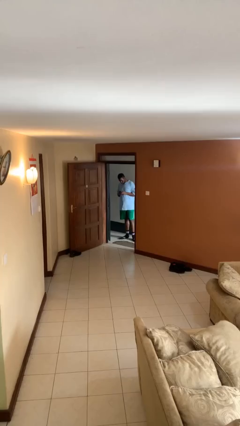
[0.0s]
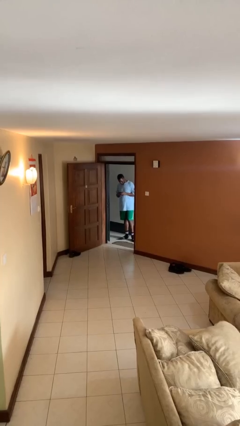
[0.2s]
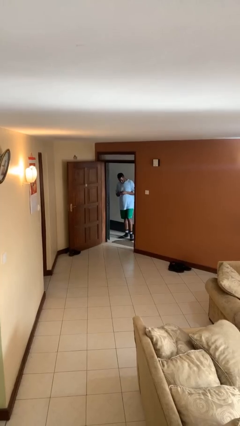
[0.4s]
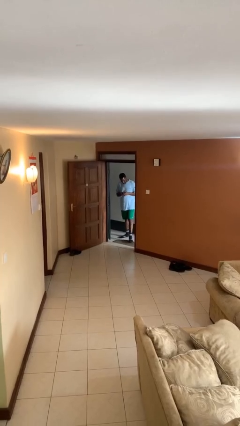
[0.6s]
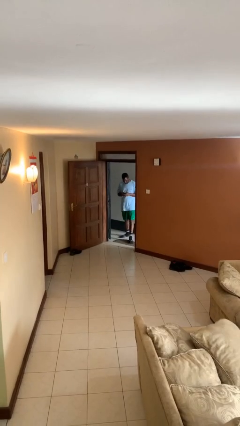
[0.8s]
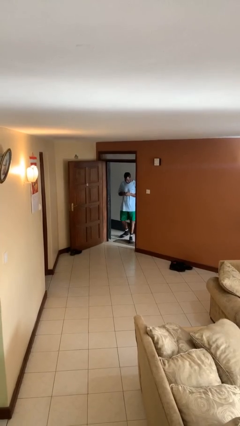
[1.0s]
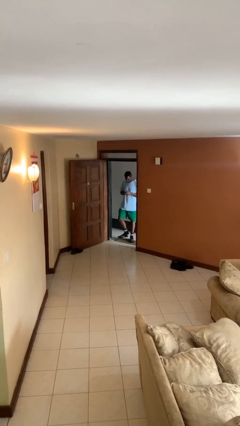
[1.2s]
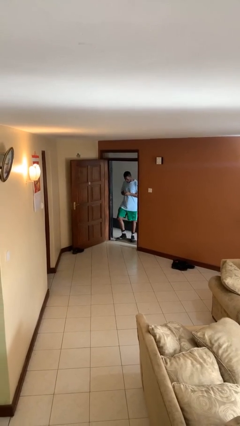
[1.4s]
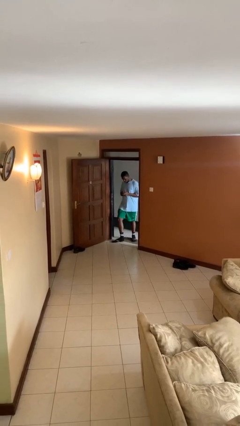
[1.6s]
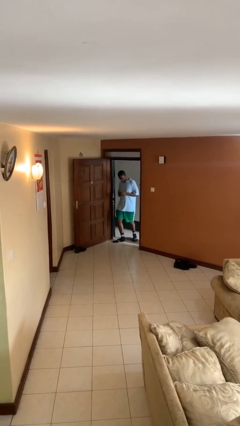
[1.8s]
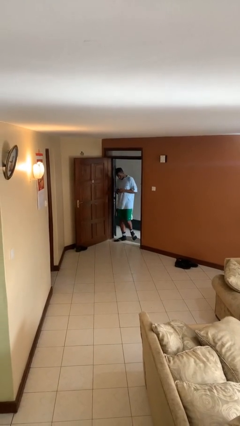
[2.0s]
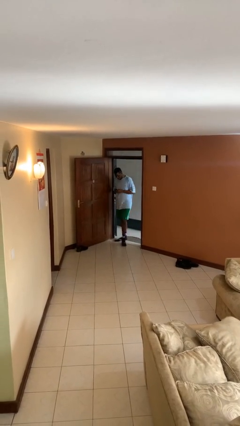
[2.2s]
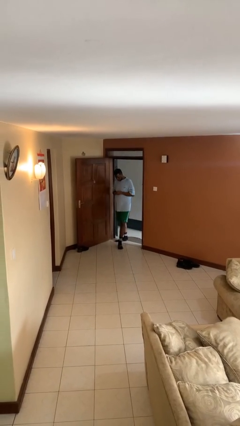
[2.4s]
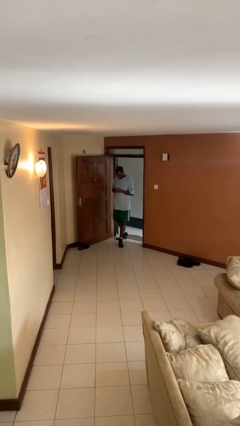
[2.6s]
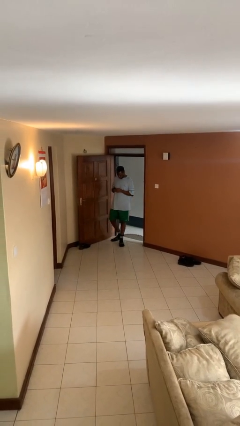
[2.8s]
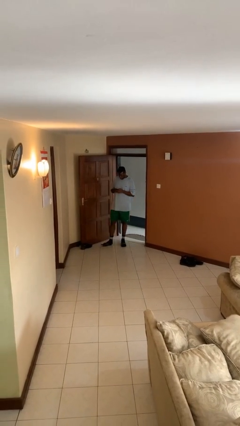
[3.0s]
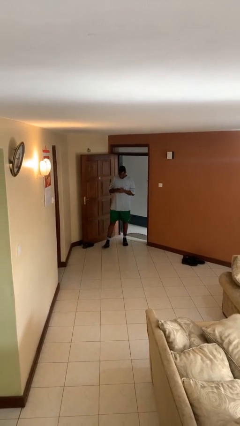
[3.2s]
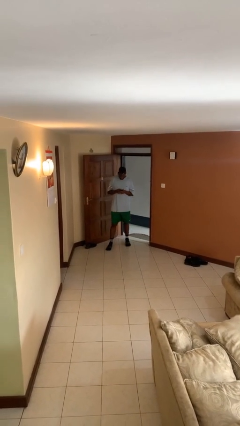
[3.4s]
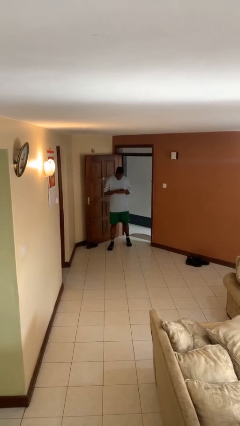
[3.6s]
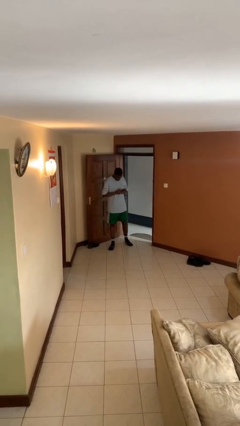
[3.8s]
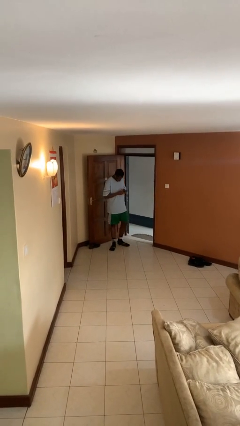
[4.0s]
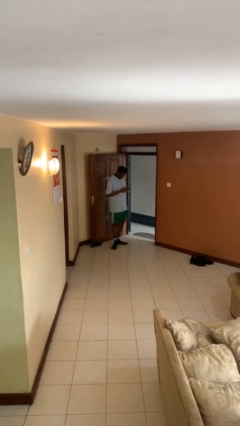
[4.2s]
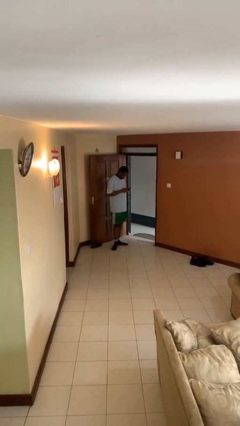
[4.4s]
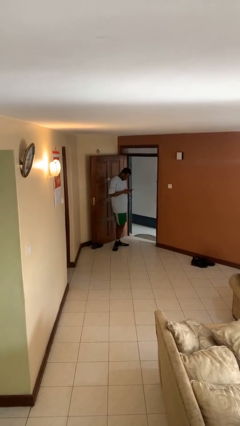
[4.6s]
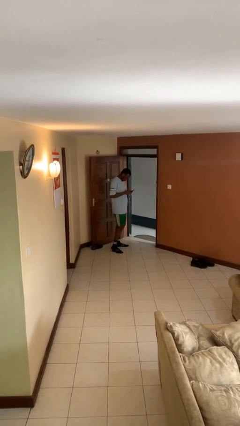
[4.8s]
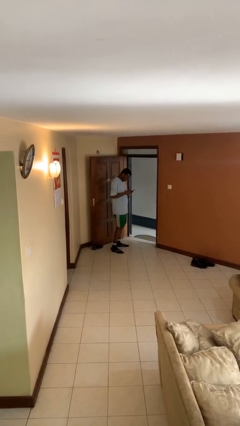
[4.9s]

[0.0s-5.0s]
person enters scene through structure

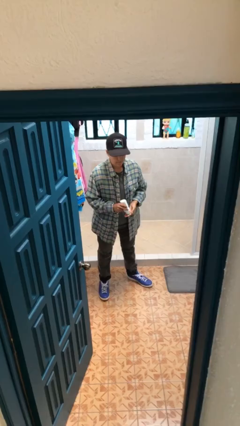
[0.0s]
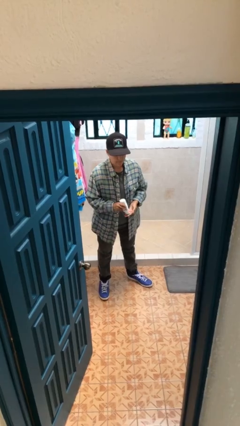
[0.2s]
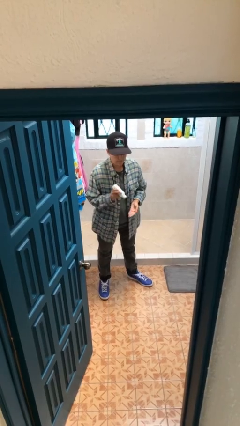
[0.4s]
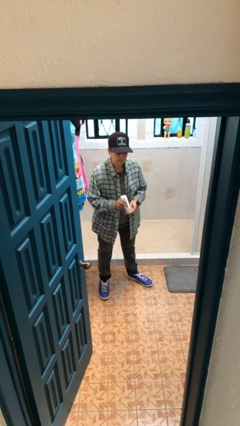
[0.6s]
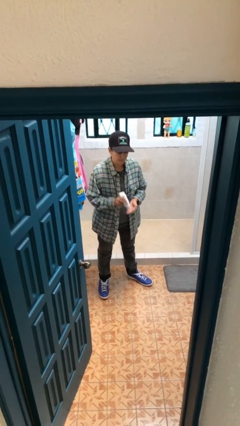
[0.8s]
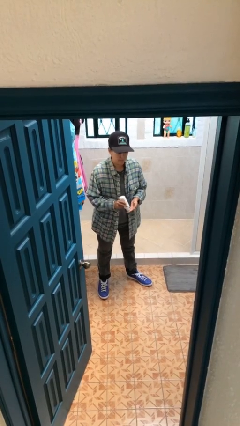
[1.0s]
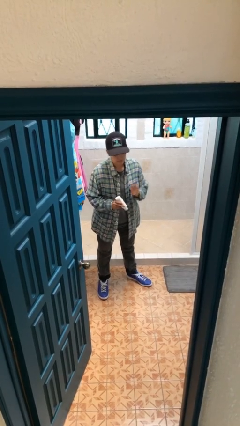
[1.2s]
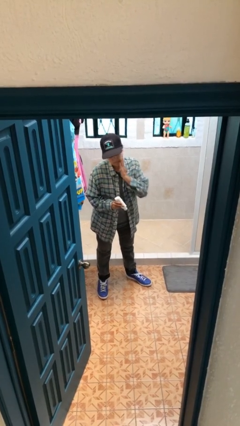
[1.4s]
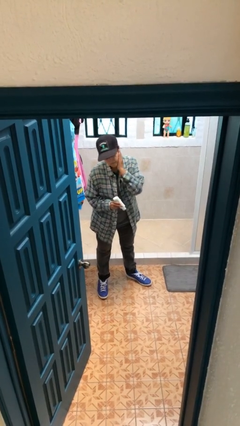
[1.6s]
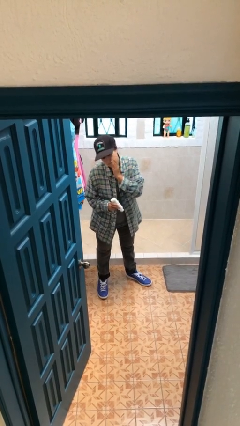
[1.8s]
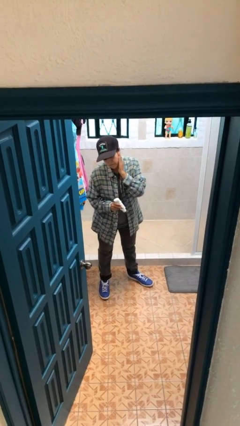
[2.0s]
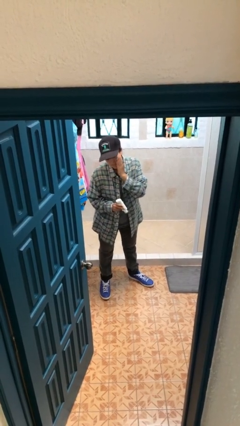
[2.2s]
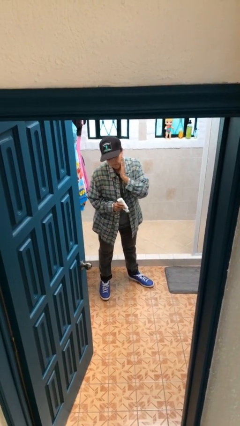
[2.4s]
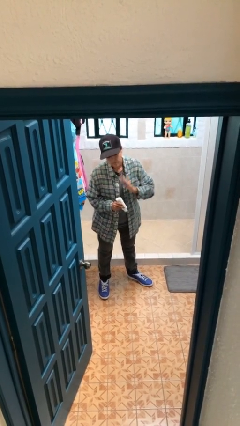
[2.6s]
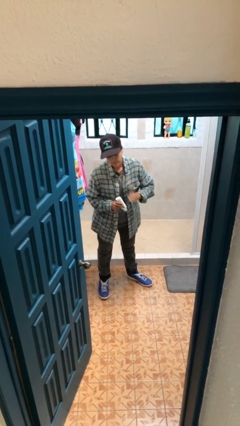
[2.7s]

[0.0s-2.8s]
person applies facial moisturizer

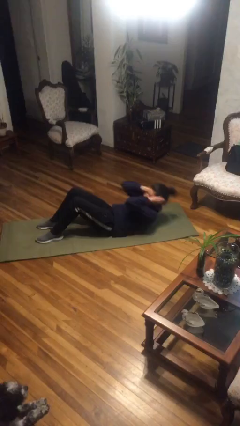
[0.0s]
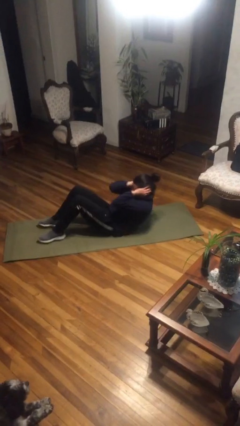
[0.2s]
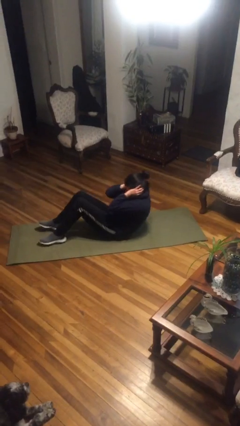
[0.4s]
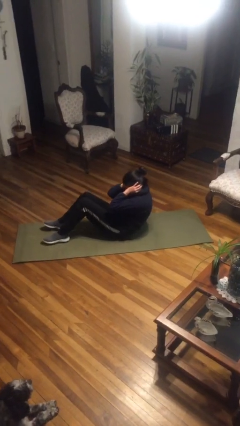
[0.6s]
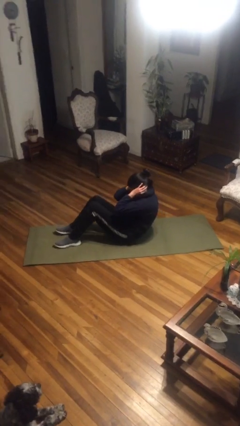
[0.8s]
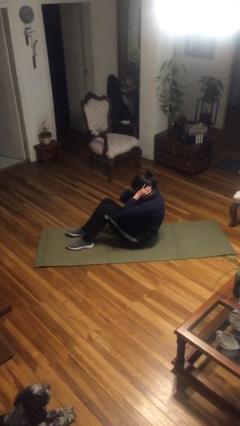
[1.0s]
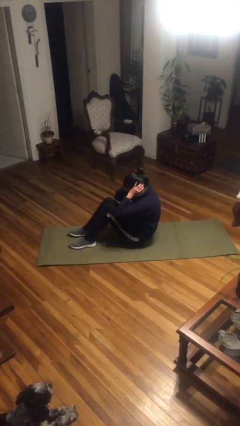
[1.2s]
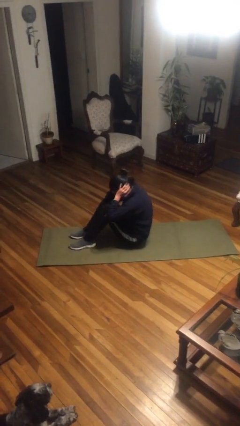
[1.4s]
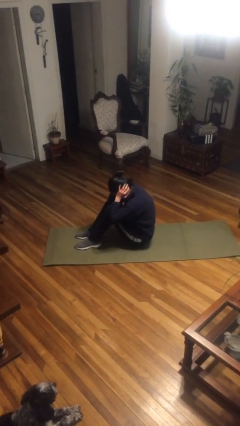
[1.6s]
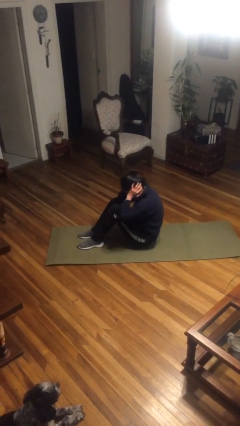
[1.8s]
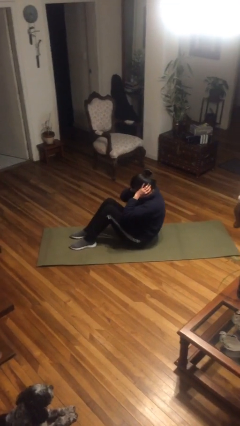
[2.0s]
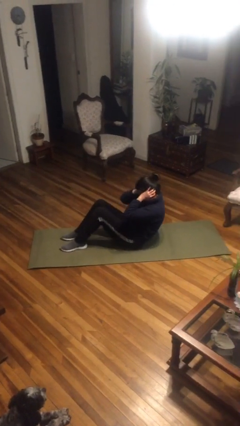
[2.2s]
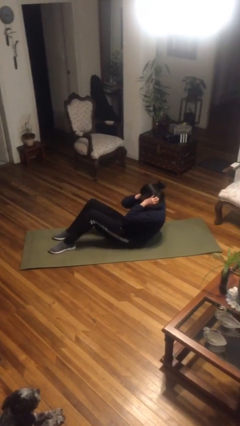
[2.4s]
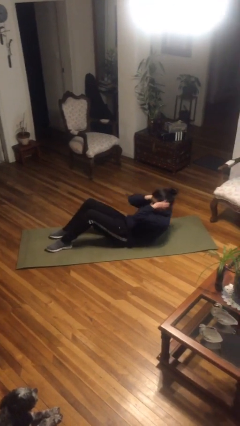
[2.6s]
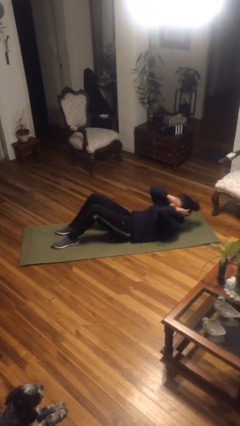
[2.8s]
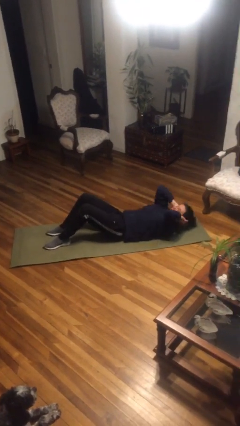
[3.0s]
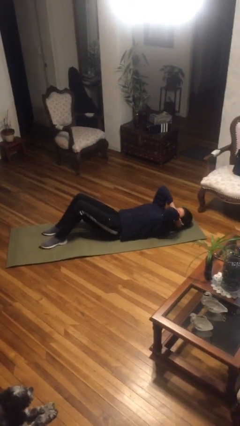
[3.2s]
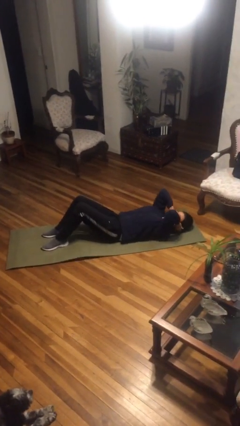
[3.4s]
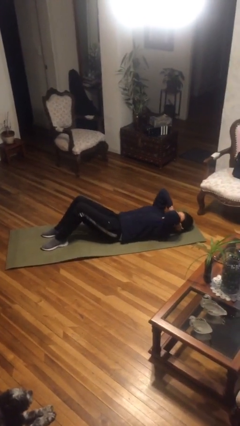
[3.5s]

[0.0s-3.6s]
person exercises with situp

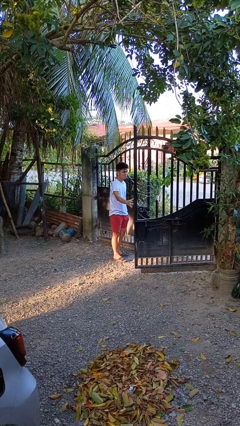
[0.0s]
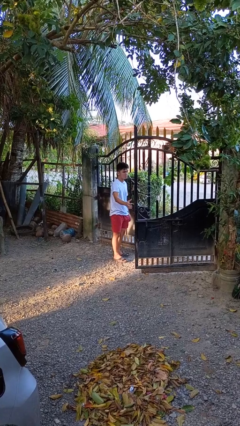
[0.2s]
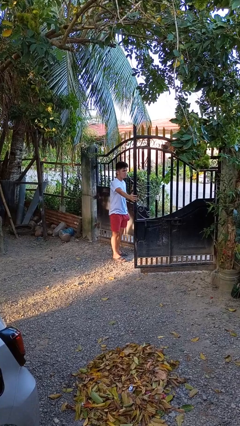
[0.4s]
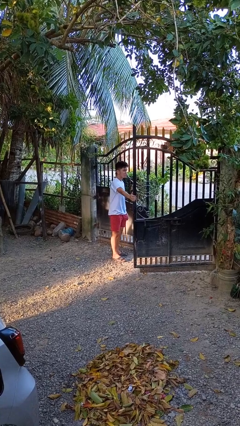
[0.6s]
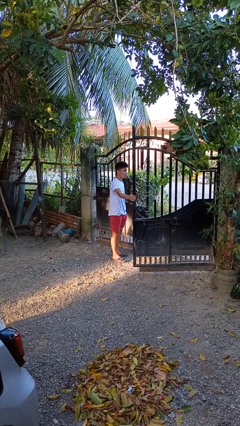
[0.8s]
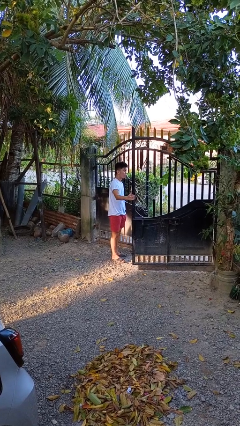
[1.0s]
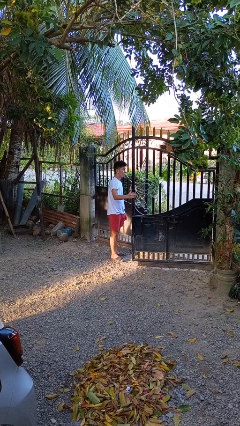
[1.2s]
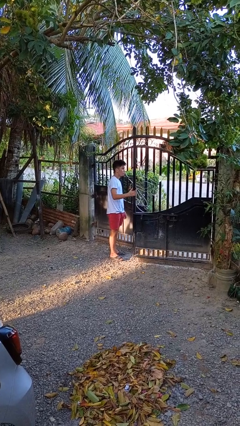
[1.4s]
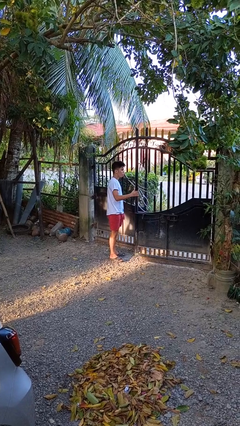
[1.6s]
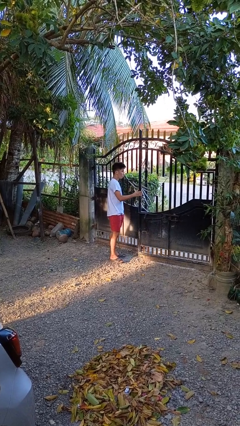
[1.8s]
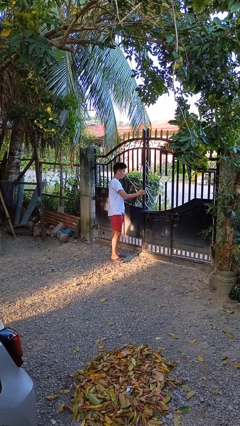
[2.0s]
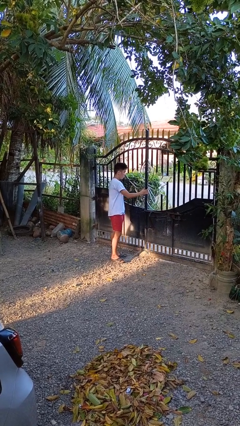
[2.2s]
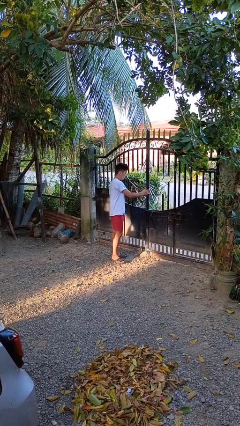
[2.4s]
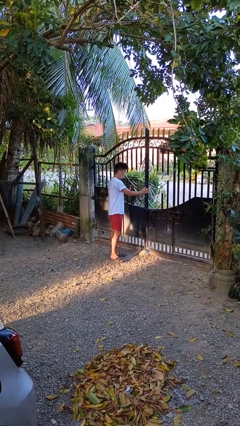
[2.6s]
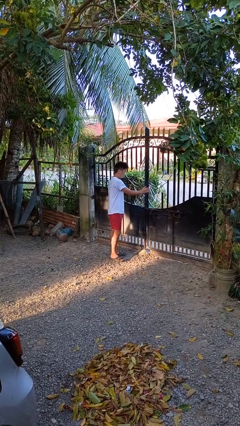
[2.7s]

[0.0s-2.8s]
person closes gate

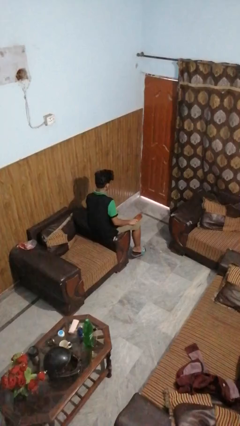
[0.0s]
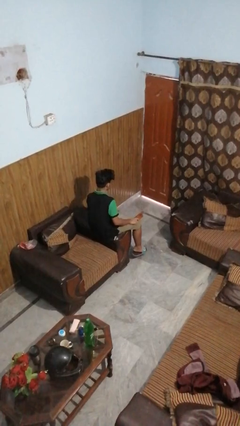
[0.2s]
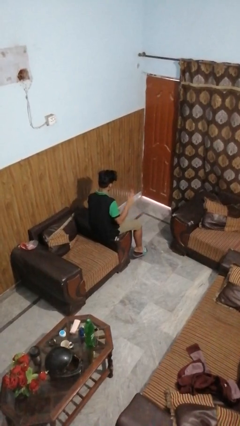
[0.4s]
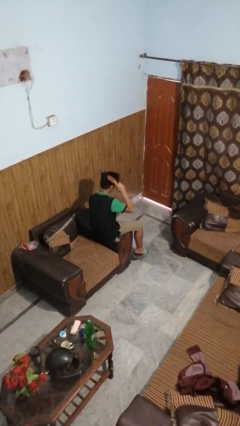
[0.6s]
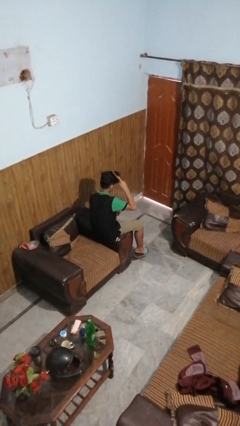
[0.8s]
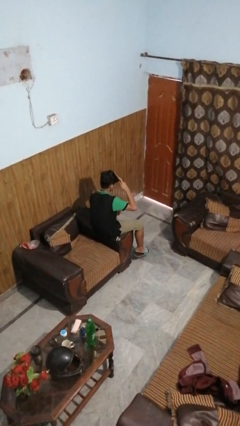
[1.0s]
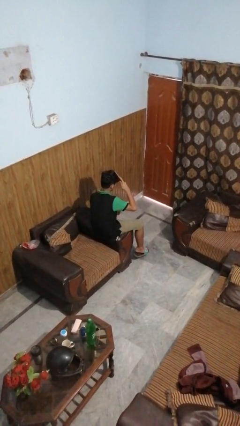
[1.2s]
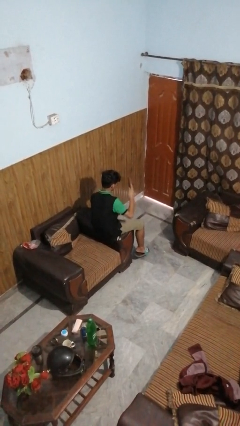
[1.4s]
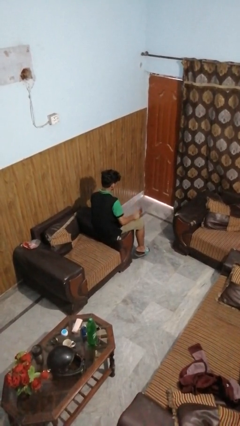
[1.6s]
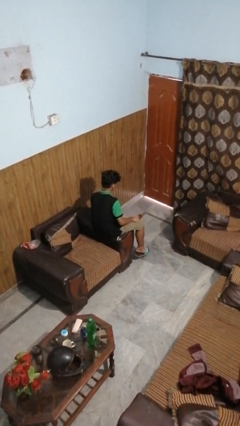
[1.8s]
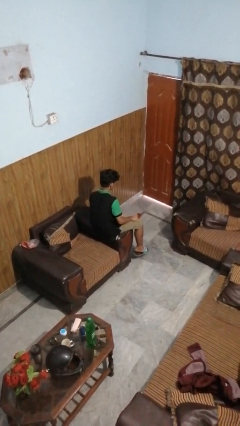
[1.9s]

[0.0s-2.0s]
person brushes hair

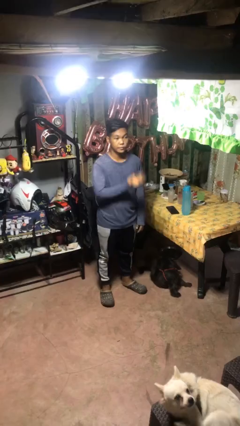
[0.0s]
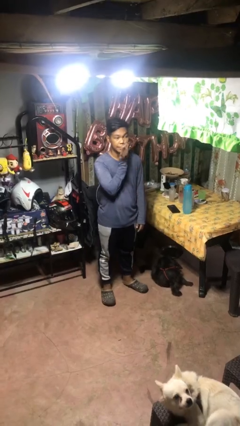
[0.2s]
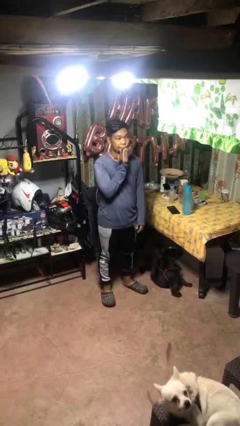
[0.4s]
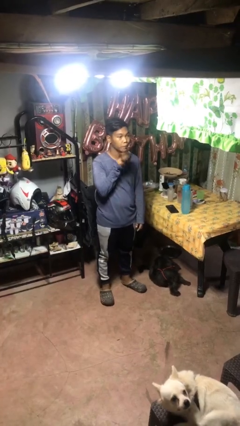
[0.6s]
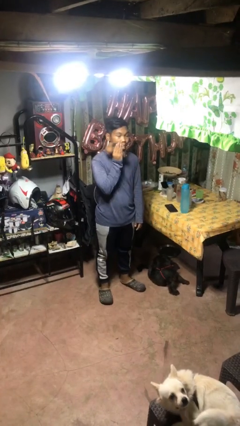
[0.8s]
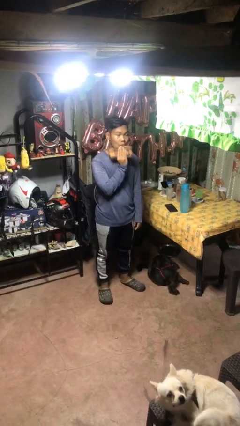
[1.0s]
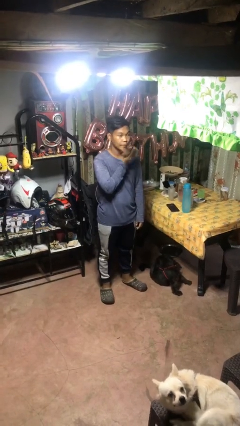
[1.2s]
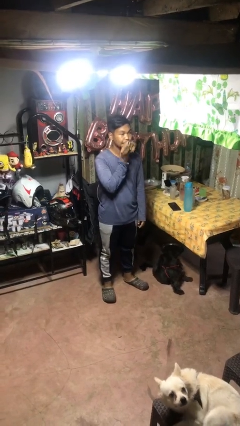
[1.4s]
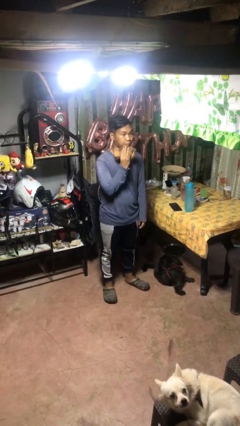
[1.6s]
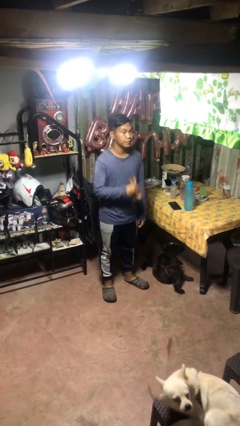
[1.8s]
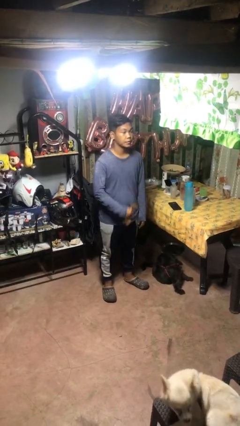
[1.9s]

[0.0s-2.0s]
person wipes mouth with napkin
